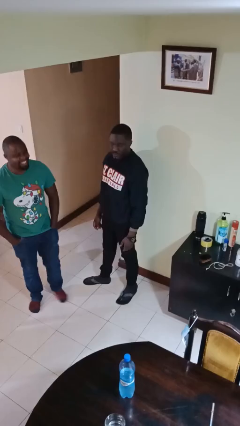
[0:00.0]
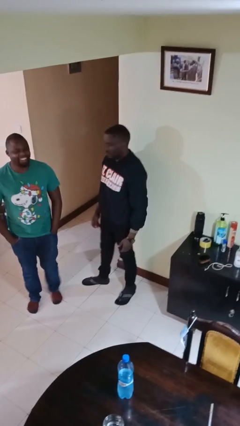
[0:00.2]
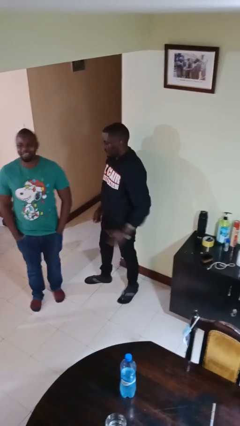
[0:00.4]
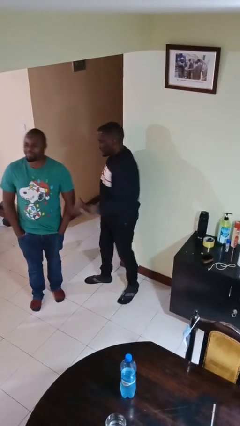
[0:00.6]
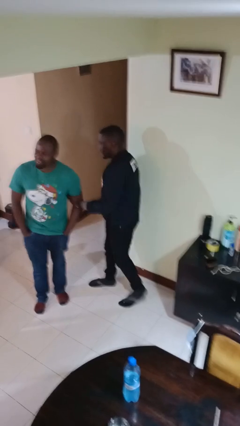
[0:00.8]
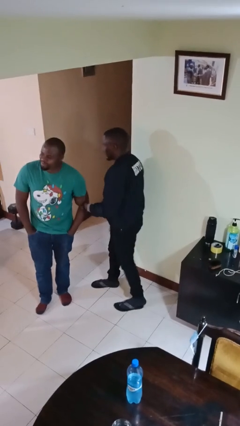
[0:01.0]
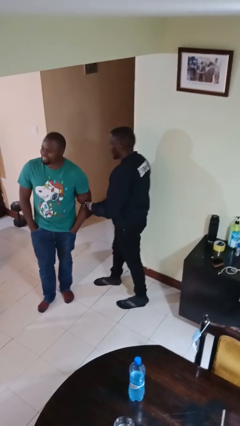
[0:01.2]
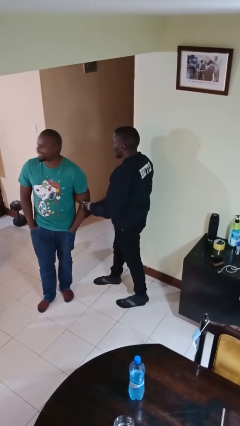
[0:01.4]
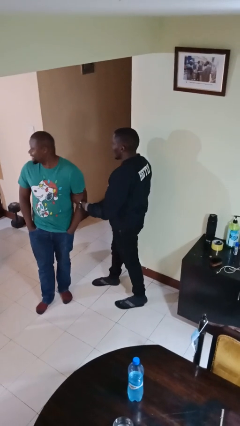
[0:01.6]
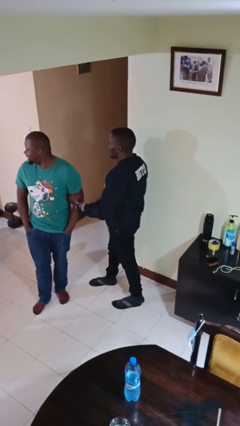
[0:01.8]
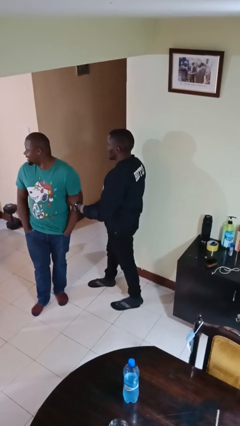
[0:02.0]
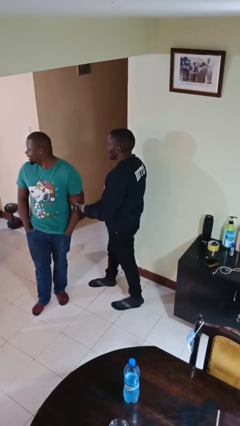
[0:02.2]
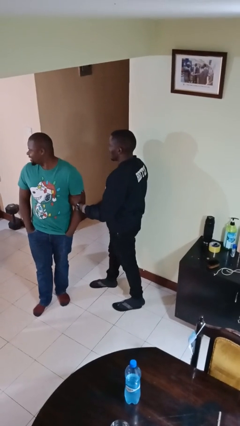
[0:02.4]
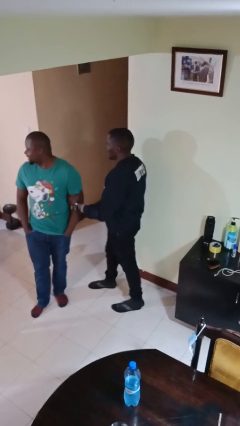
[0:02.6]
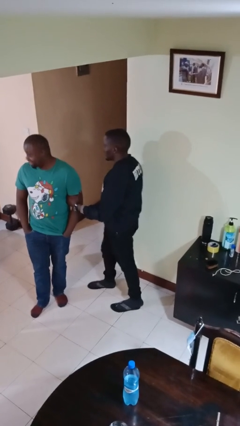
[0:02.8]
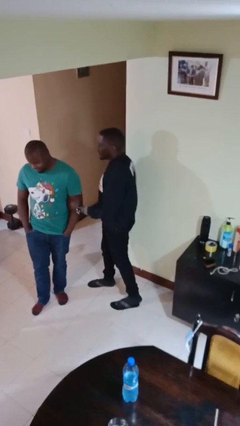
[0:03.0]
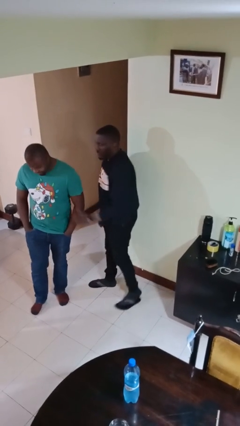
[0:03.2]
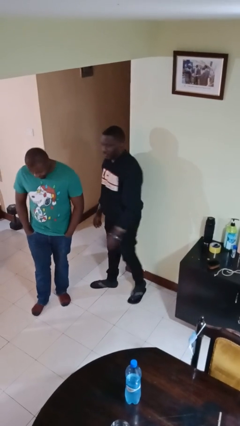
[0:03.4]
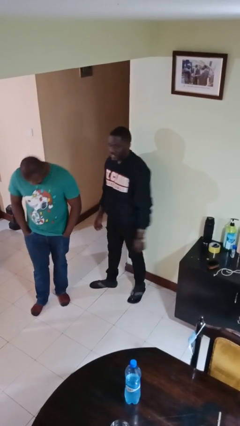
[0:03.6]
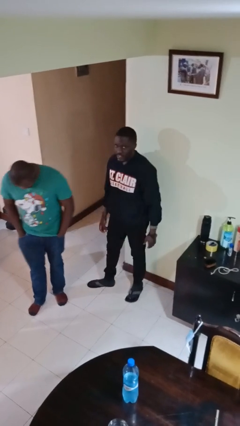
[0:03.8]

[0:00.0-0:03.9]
person grabs person by bicep

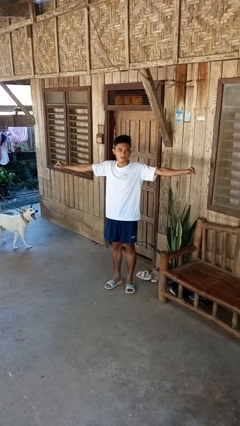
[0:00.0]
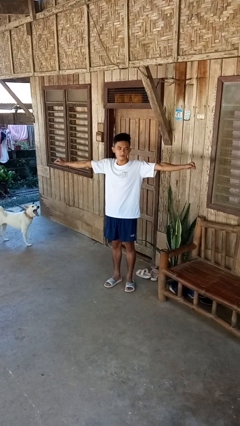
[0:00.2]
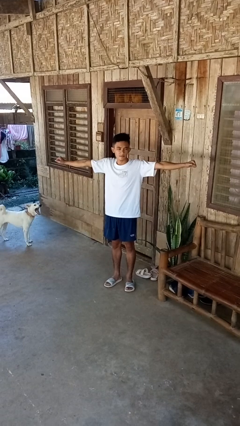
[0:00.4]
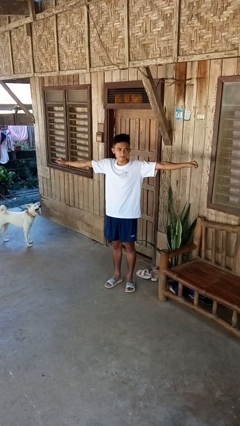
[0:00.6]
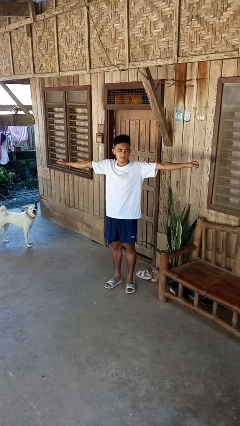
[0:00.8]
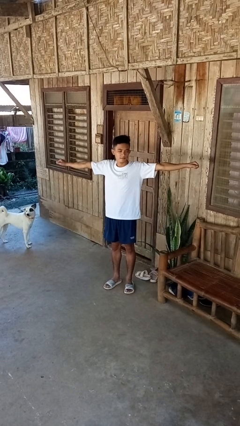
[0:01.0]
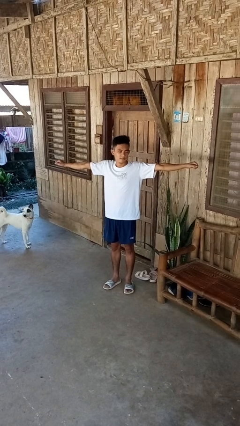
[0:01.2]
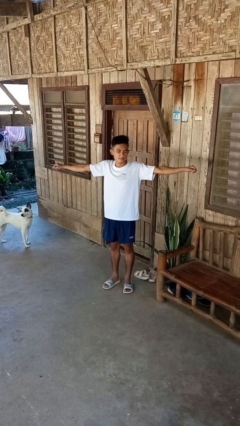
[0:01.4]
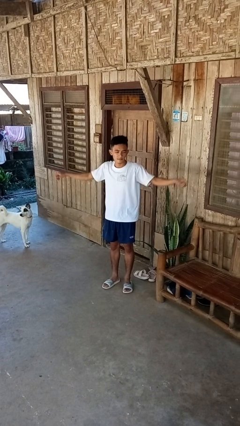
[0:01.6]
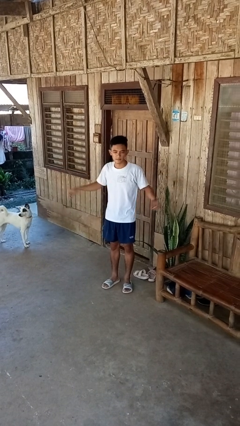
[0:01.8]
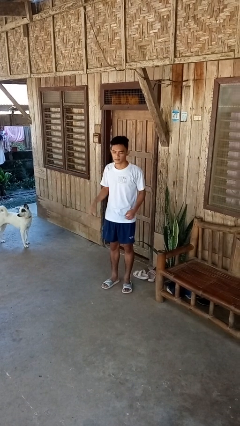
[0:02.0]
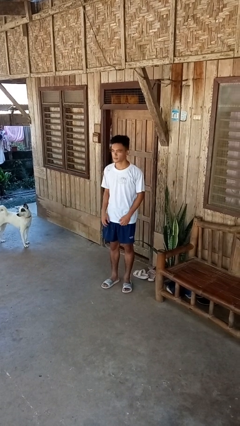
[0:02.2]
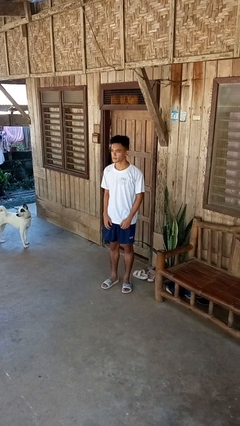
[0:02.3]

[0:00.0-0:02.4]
person stretches arms to side

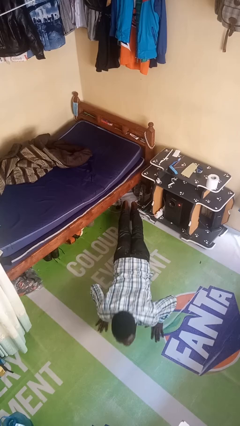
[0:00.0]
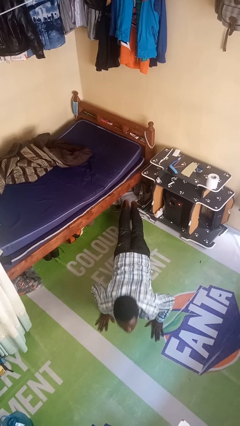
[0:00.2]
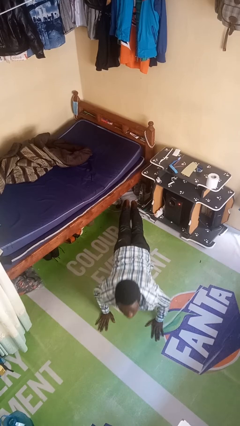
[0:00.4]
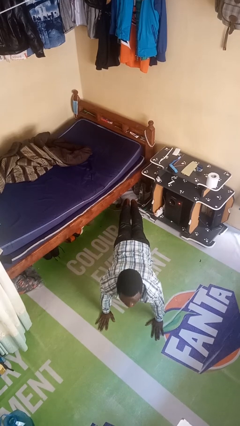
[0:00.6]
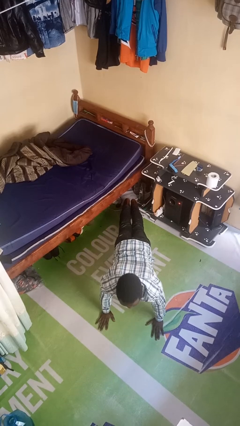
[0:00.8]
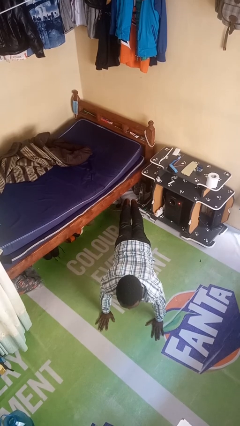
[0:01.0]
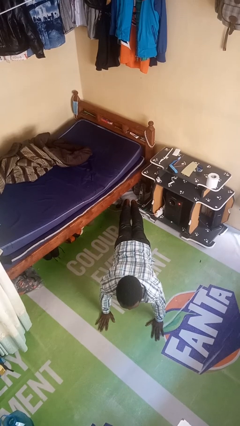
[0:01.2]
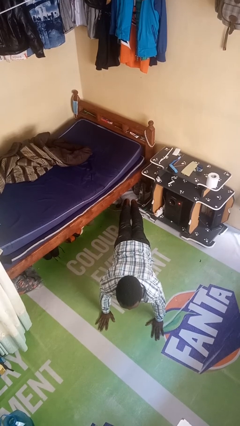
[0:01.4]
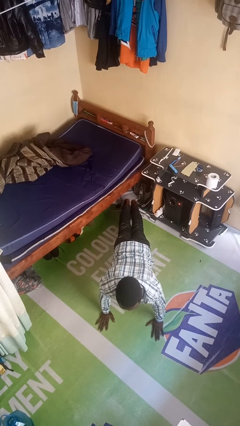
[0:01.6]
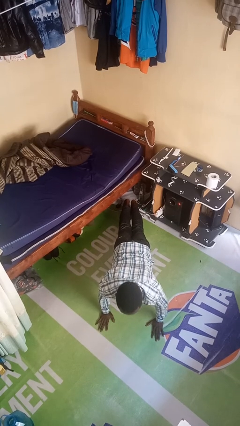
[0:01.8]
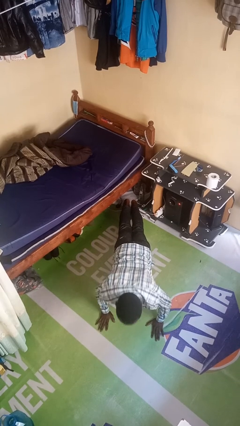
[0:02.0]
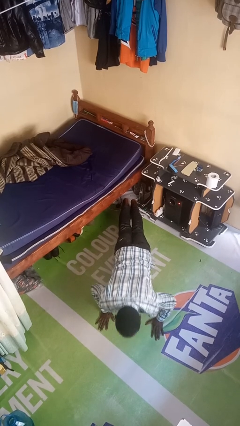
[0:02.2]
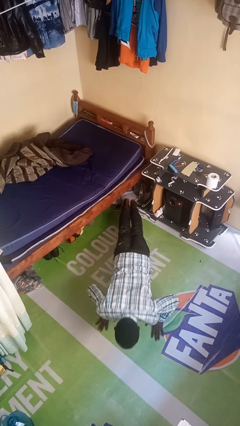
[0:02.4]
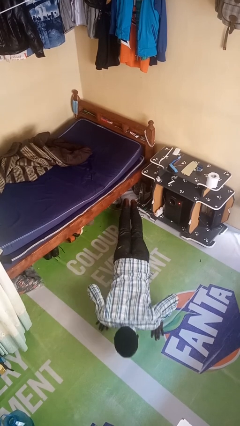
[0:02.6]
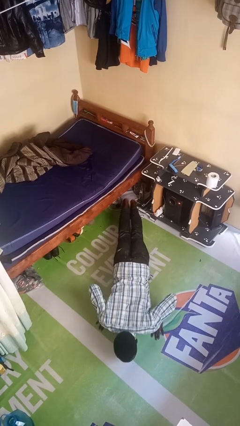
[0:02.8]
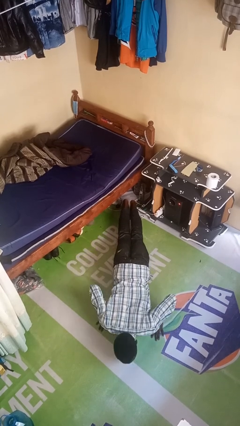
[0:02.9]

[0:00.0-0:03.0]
person exercises with pushup

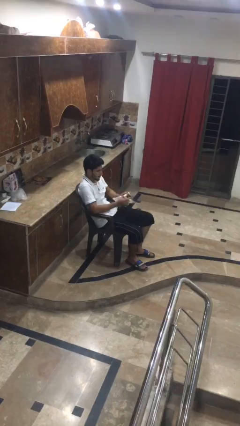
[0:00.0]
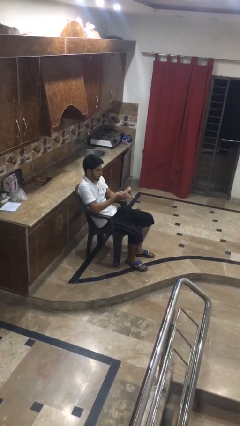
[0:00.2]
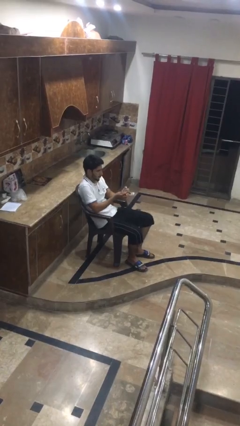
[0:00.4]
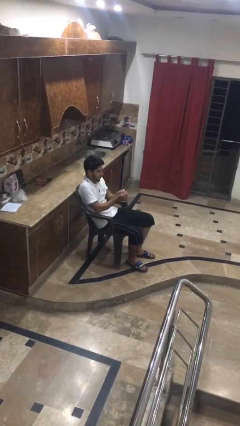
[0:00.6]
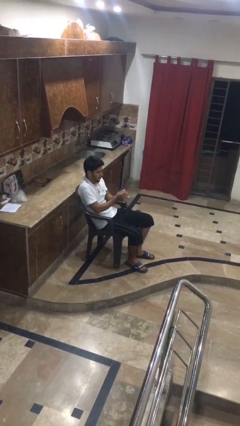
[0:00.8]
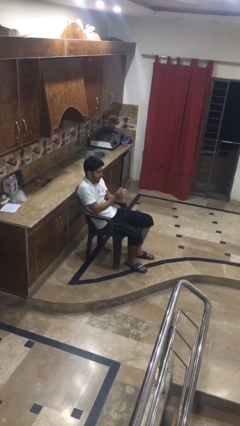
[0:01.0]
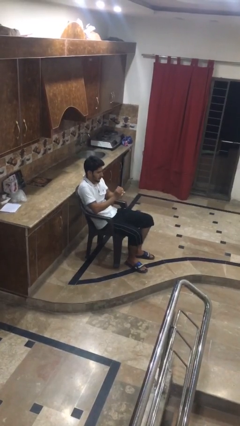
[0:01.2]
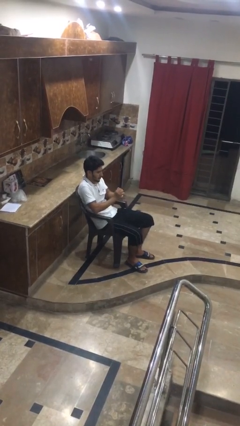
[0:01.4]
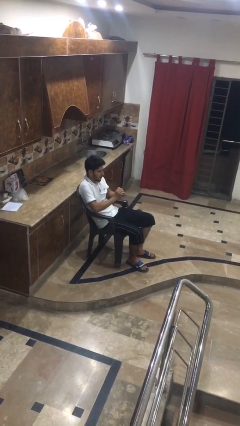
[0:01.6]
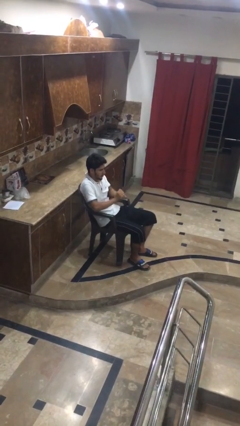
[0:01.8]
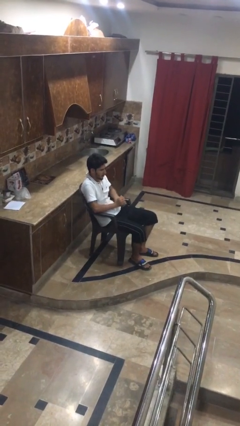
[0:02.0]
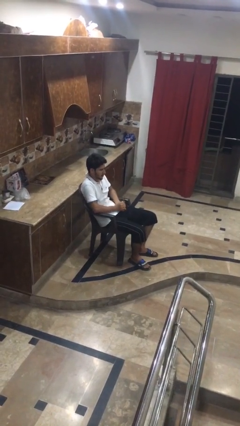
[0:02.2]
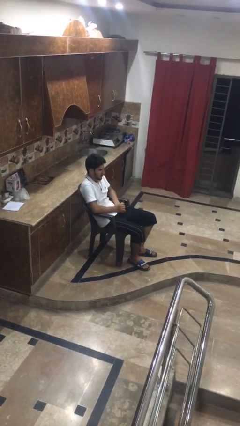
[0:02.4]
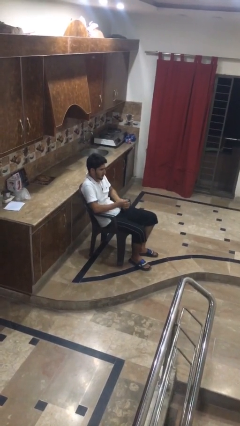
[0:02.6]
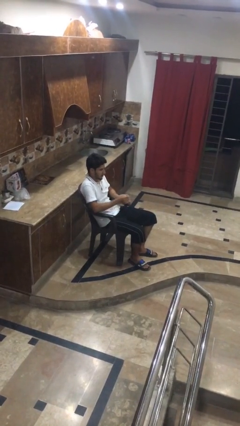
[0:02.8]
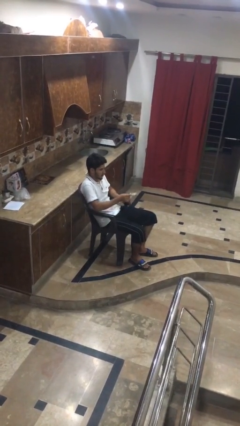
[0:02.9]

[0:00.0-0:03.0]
person crumples paper

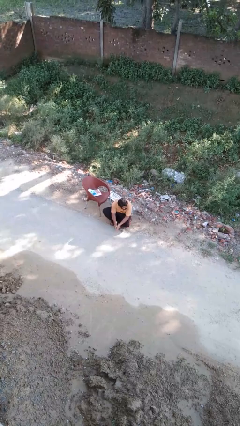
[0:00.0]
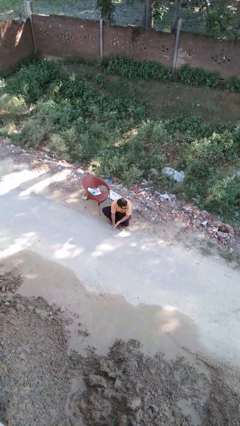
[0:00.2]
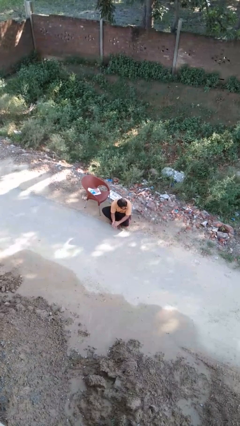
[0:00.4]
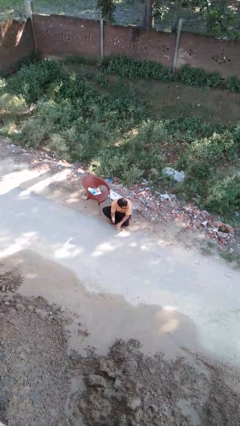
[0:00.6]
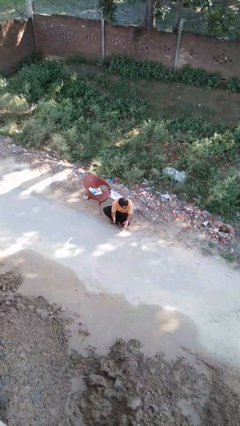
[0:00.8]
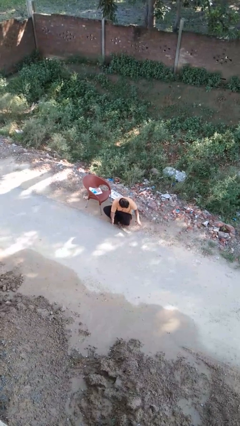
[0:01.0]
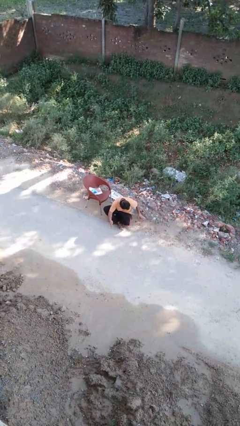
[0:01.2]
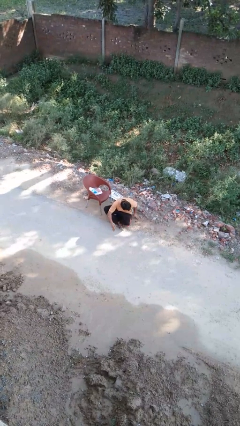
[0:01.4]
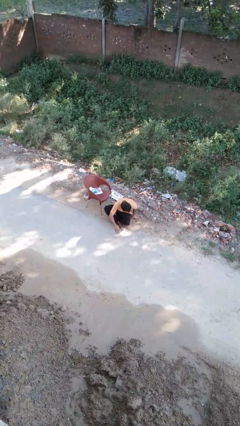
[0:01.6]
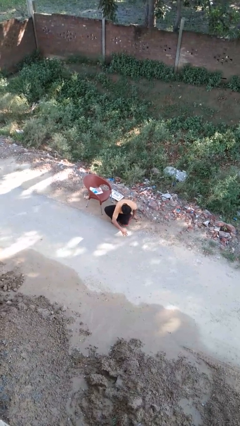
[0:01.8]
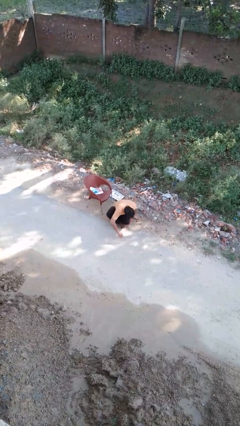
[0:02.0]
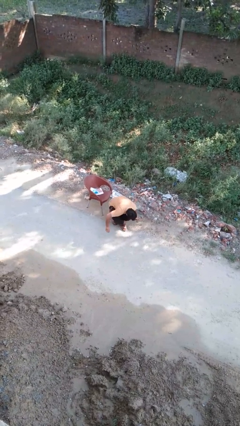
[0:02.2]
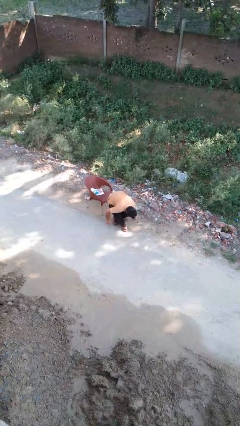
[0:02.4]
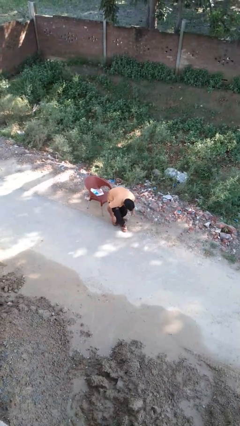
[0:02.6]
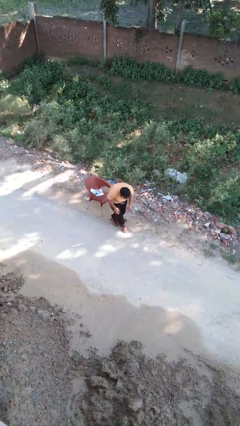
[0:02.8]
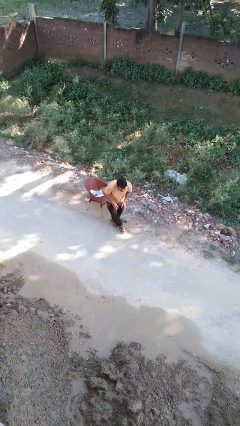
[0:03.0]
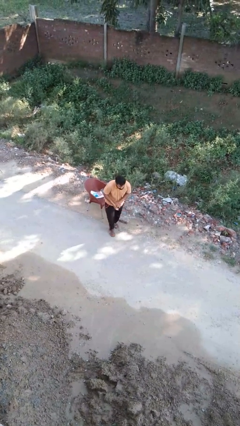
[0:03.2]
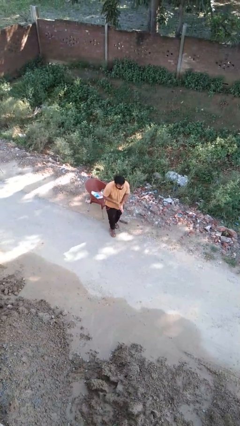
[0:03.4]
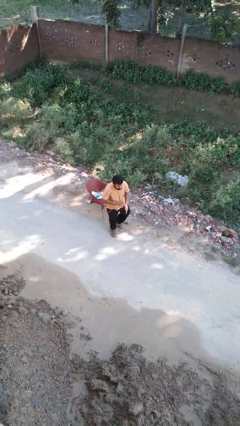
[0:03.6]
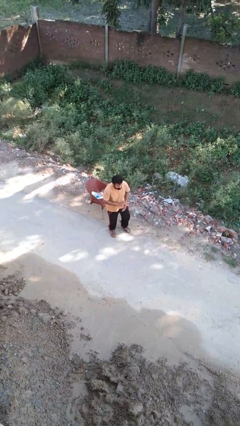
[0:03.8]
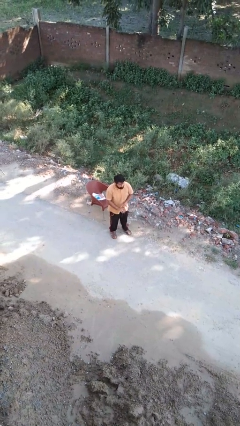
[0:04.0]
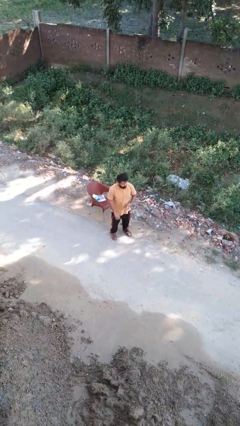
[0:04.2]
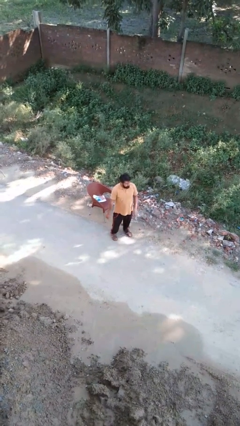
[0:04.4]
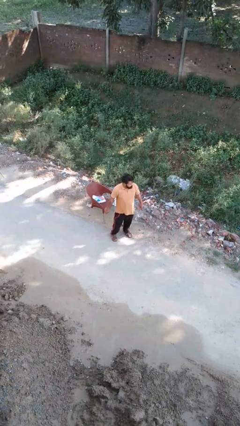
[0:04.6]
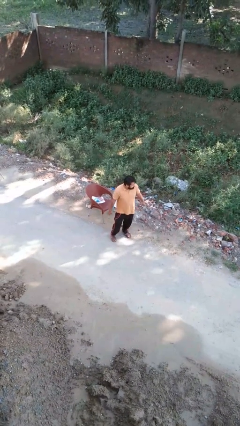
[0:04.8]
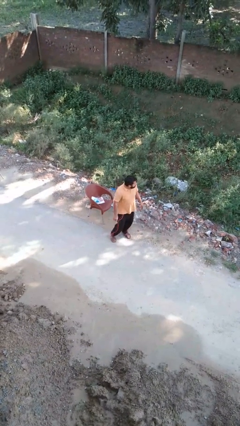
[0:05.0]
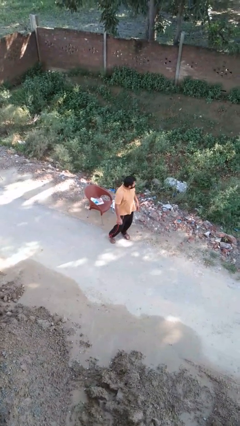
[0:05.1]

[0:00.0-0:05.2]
person stands up from floor
